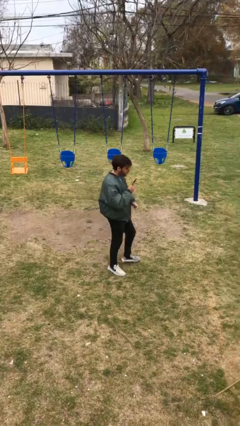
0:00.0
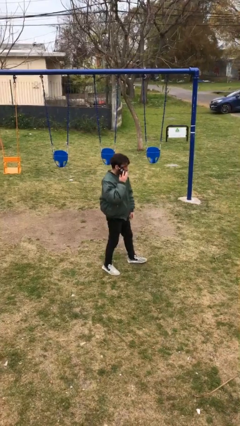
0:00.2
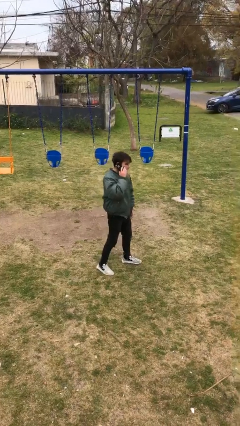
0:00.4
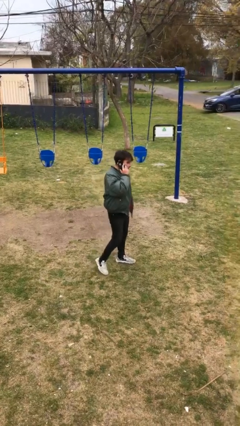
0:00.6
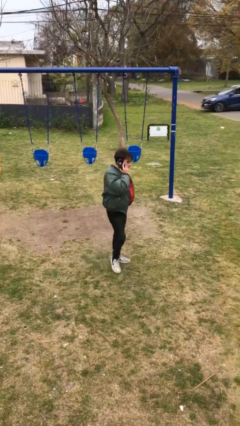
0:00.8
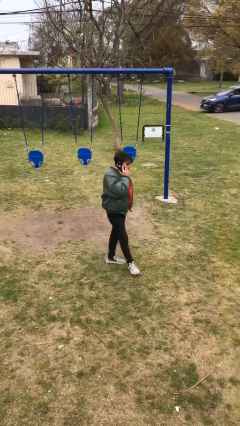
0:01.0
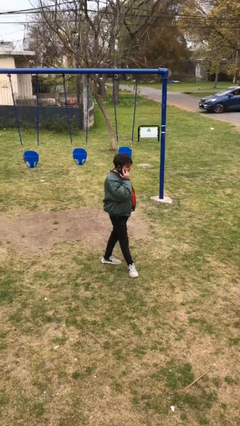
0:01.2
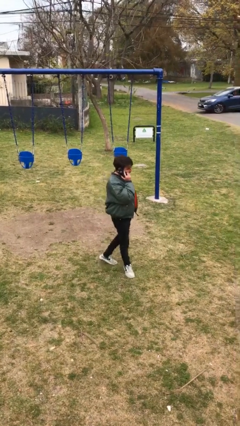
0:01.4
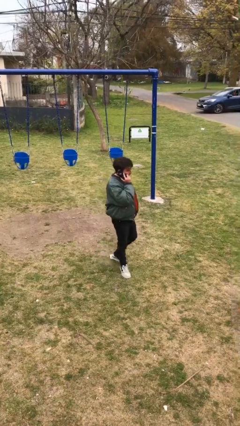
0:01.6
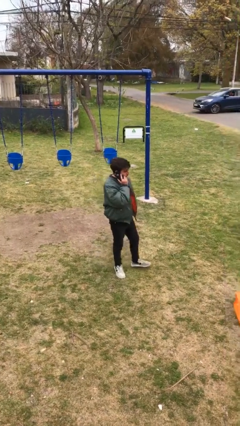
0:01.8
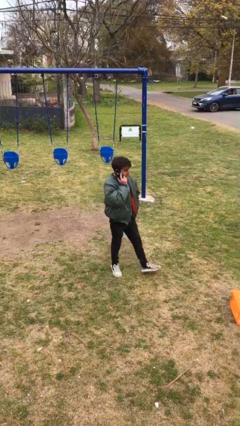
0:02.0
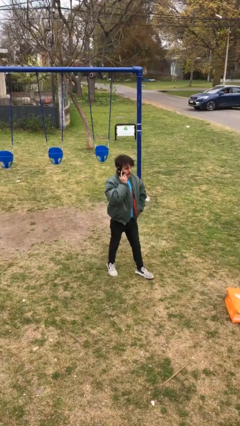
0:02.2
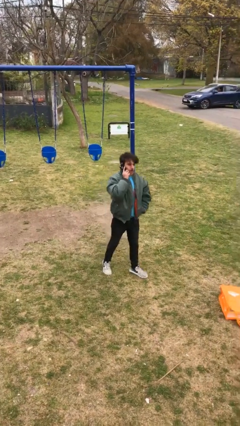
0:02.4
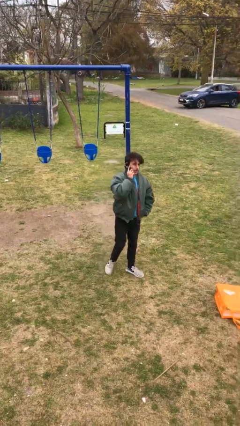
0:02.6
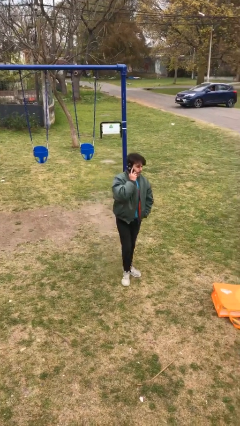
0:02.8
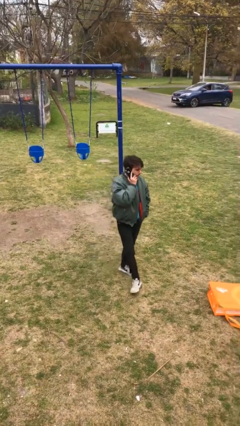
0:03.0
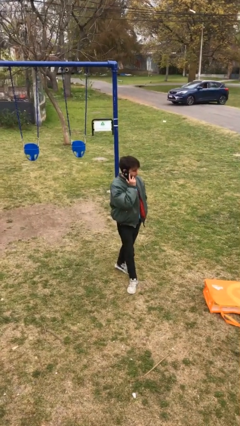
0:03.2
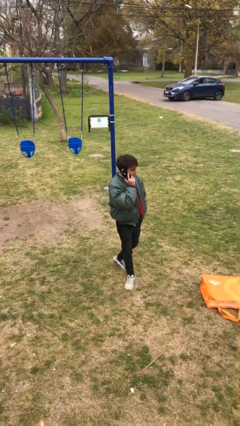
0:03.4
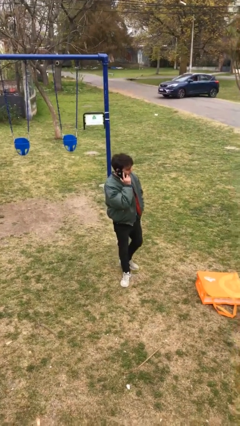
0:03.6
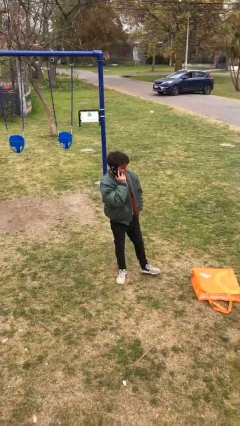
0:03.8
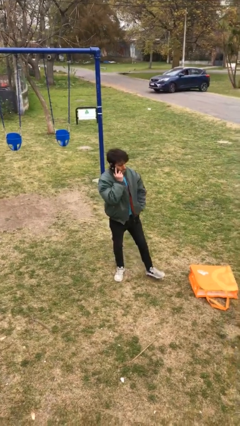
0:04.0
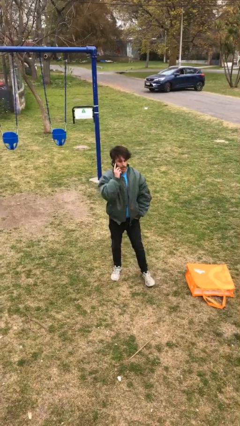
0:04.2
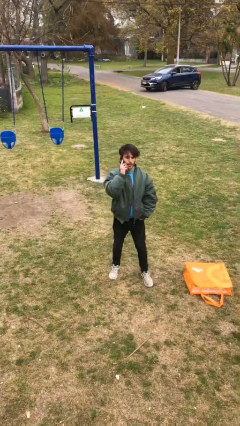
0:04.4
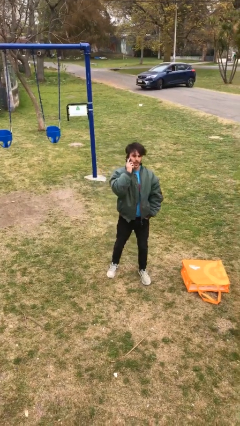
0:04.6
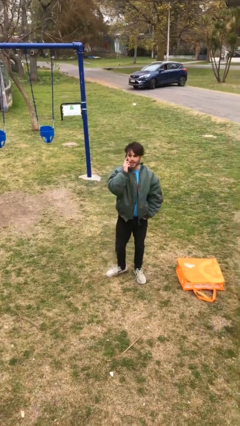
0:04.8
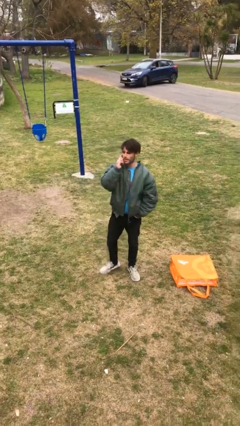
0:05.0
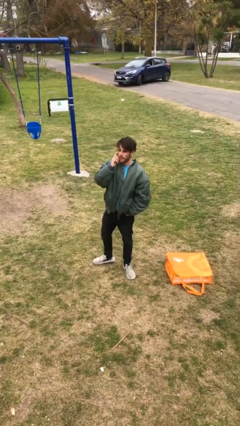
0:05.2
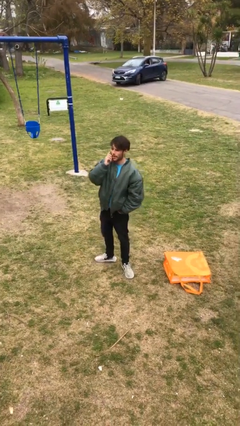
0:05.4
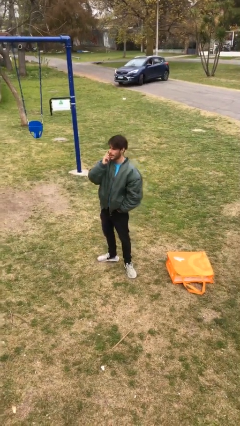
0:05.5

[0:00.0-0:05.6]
person talks on phone

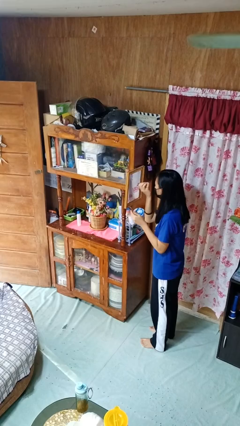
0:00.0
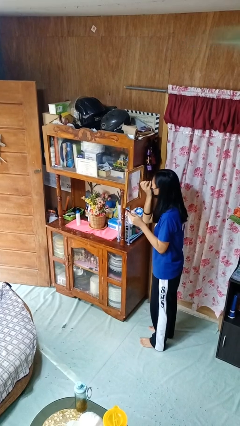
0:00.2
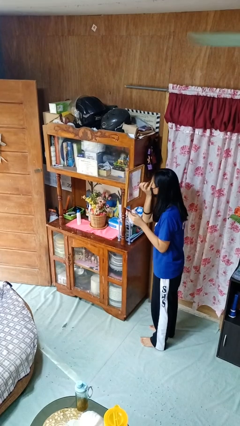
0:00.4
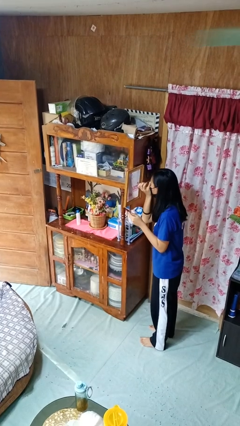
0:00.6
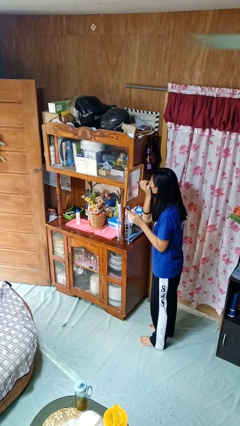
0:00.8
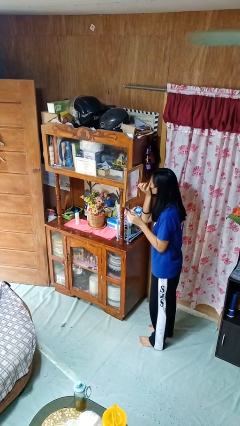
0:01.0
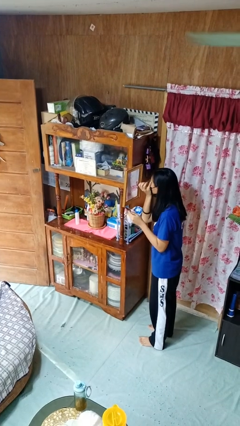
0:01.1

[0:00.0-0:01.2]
person applies eye makeup

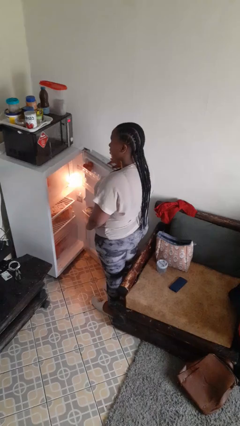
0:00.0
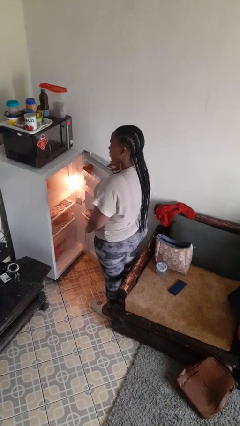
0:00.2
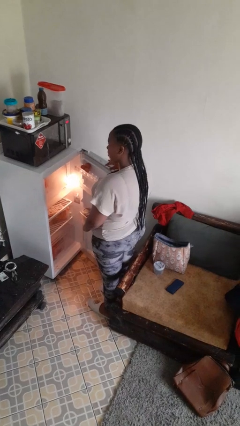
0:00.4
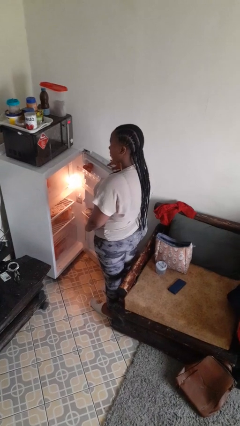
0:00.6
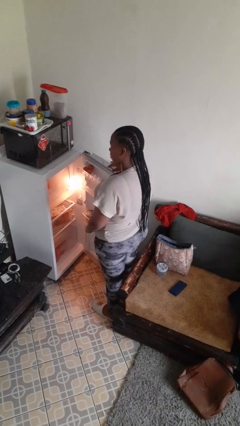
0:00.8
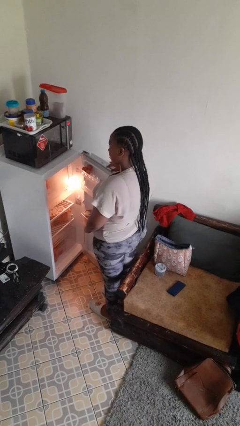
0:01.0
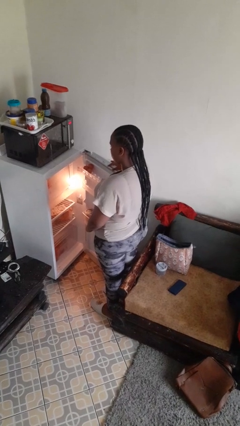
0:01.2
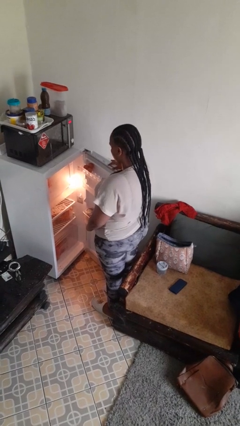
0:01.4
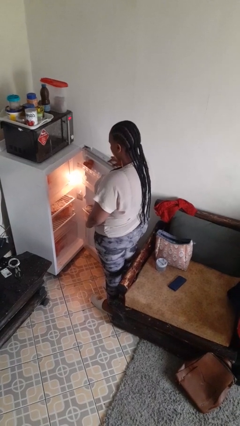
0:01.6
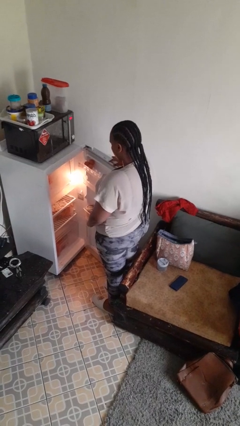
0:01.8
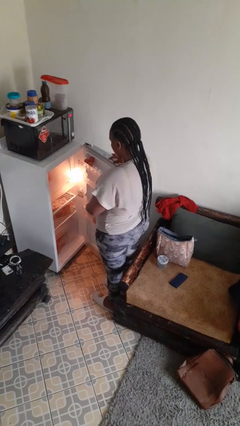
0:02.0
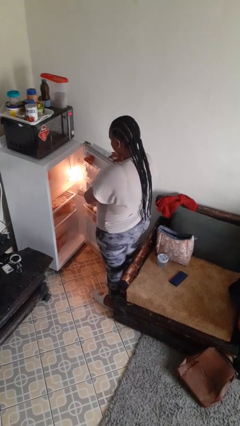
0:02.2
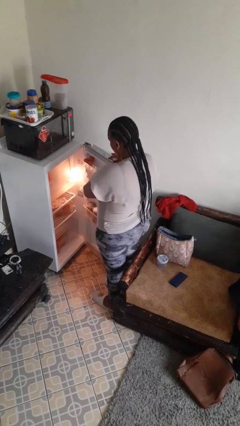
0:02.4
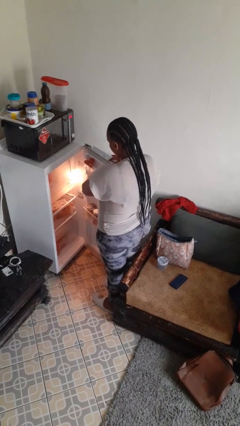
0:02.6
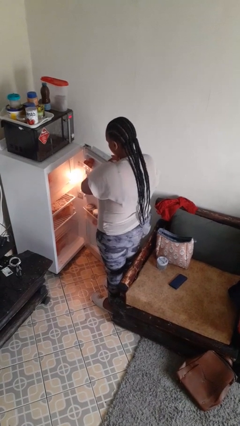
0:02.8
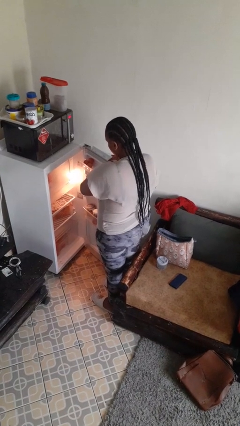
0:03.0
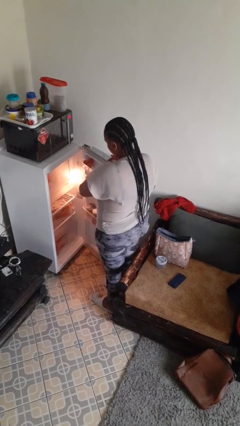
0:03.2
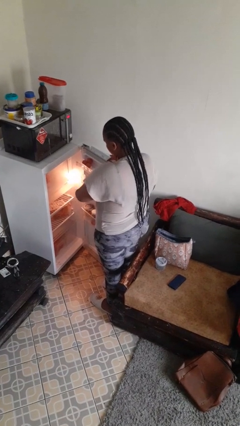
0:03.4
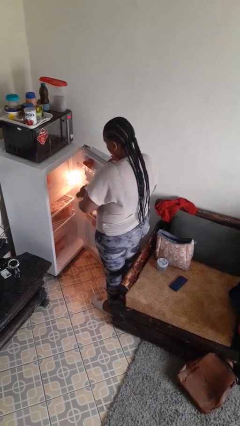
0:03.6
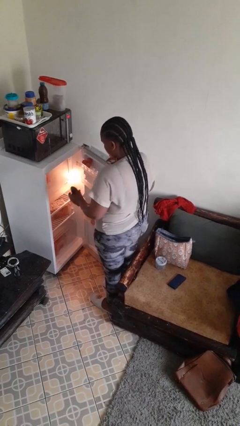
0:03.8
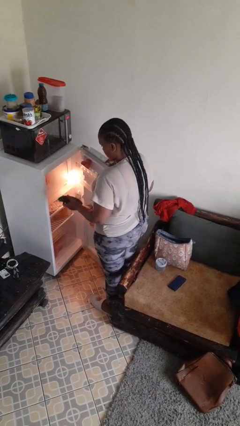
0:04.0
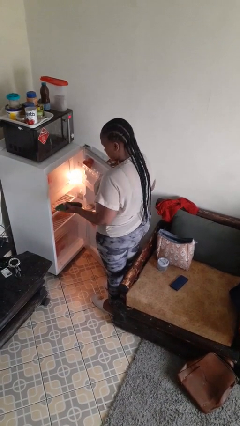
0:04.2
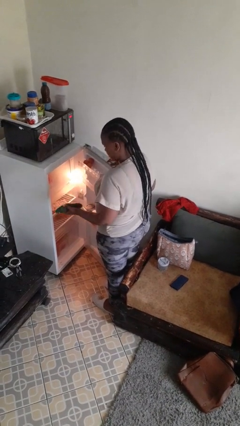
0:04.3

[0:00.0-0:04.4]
person takes object from refrigerator

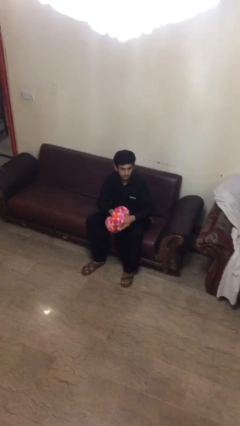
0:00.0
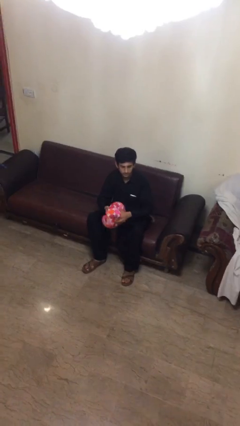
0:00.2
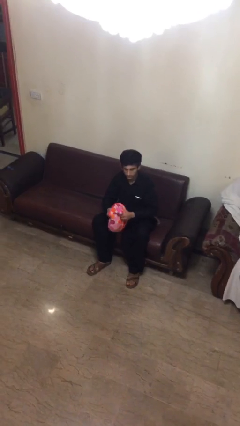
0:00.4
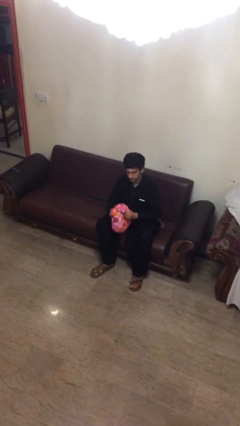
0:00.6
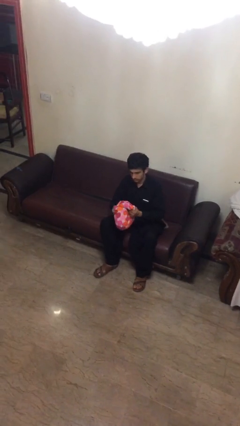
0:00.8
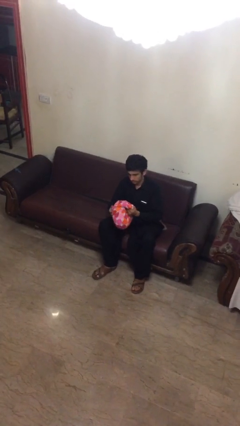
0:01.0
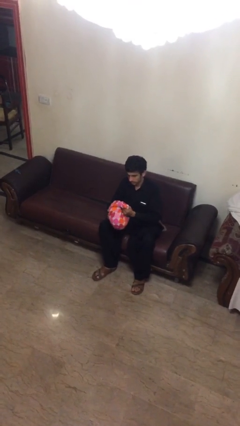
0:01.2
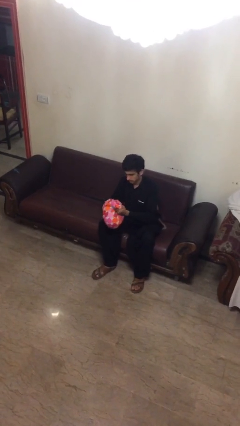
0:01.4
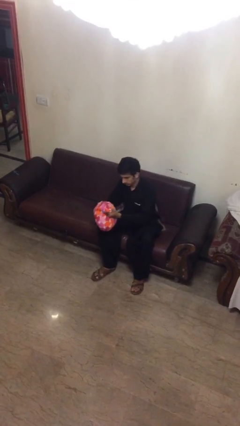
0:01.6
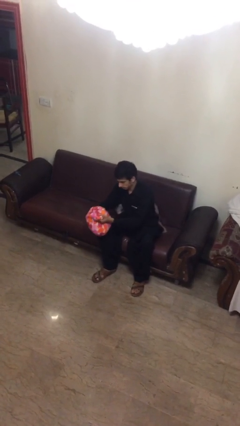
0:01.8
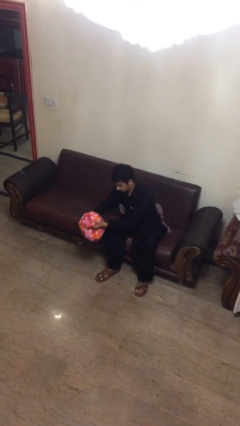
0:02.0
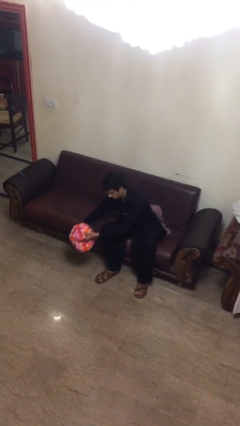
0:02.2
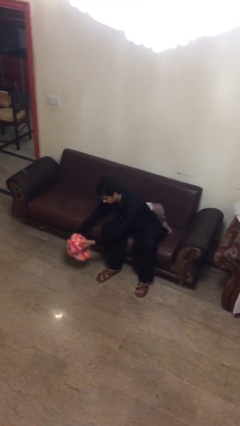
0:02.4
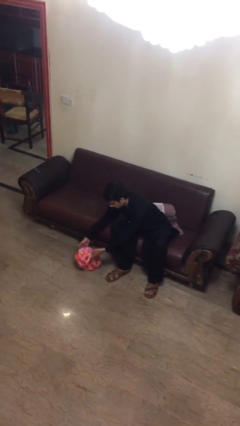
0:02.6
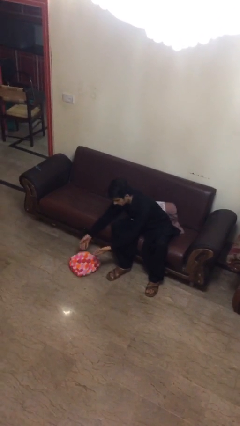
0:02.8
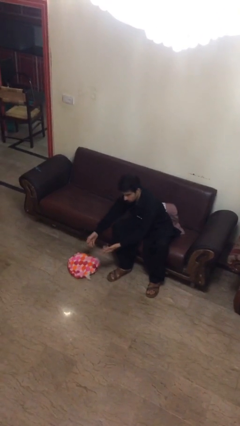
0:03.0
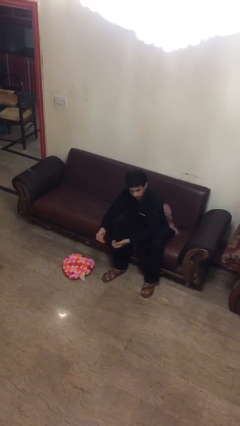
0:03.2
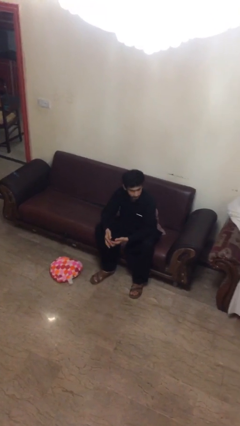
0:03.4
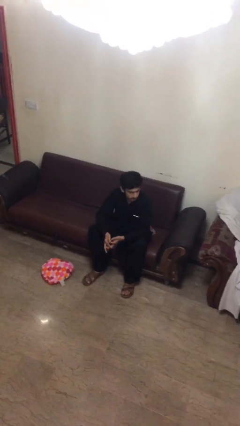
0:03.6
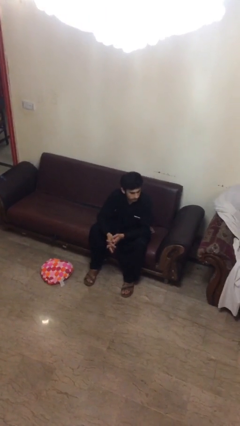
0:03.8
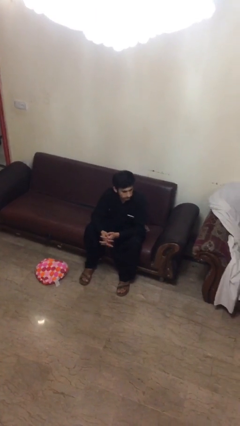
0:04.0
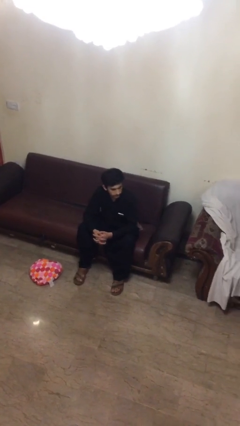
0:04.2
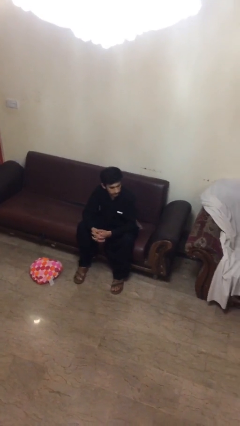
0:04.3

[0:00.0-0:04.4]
person puts down object on floor

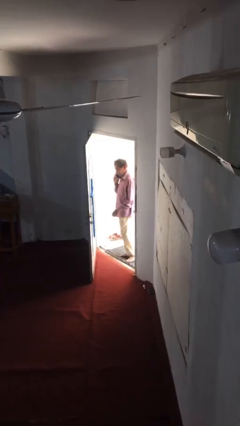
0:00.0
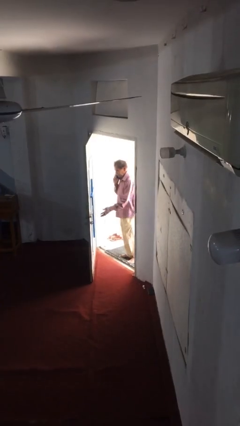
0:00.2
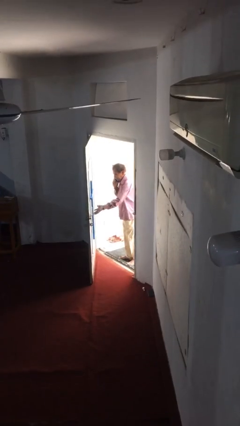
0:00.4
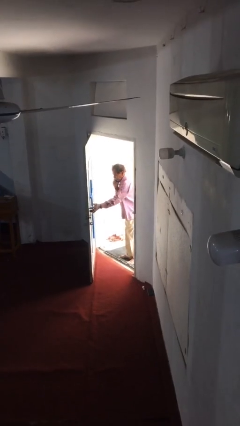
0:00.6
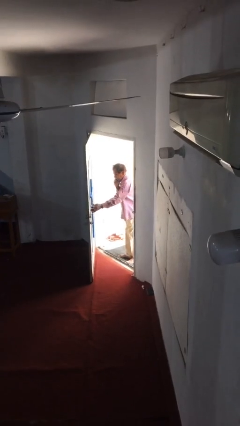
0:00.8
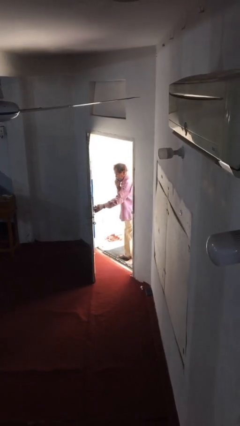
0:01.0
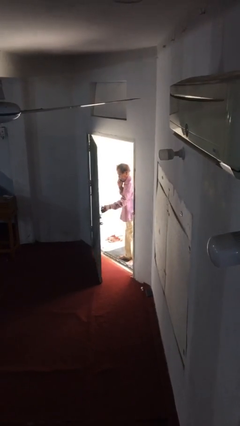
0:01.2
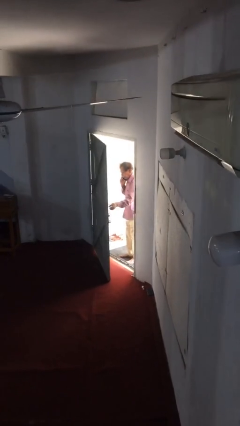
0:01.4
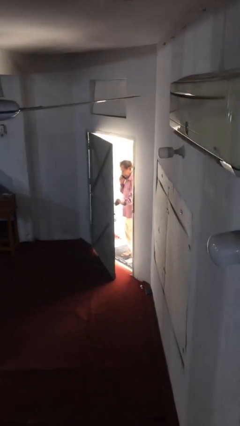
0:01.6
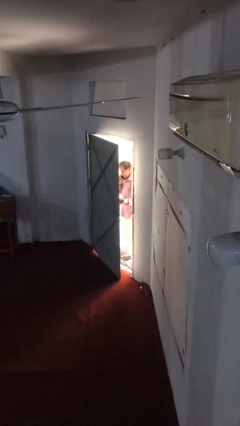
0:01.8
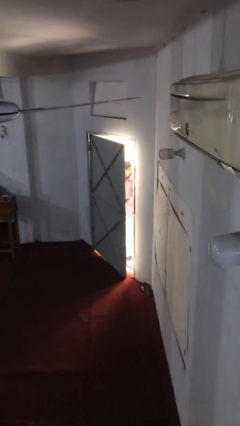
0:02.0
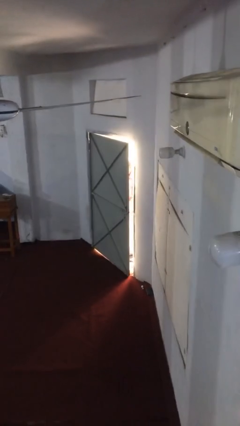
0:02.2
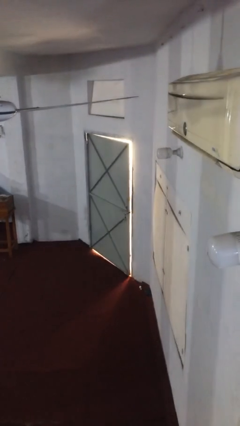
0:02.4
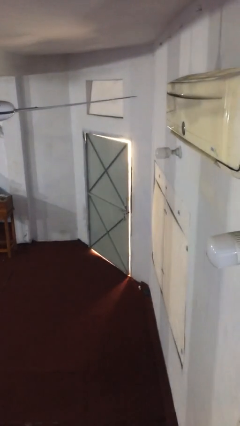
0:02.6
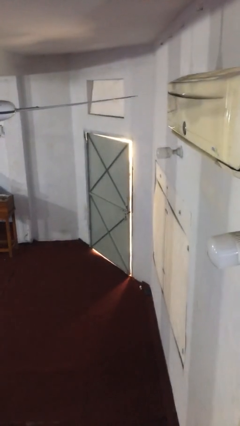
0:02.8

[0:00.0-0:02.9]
person closes facility door
